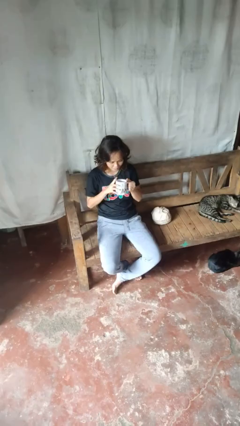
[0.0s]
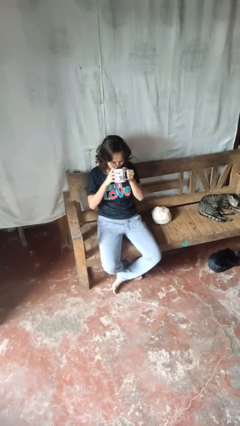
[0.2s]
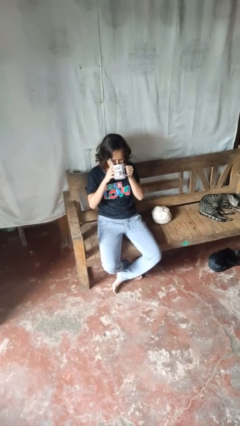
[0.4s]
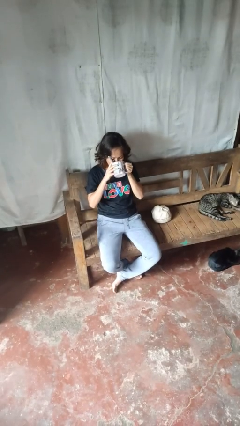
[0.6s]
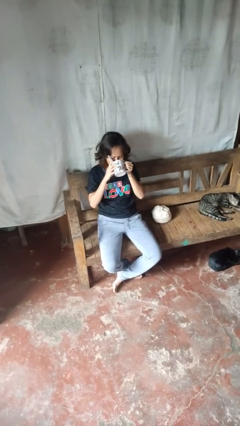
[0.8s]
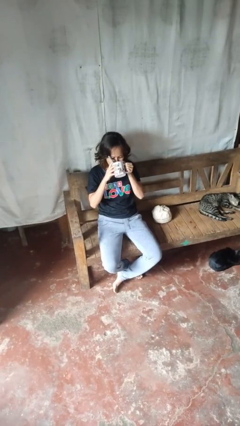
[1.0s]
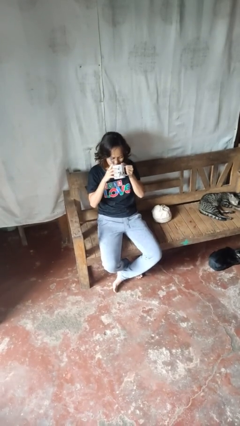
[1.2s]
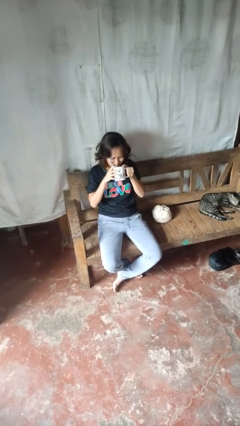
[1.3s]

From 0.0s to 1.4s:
person drinks from mug

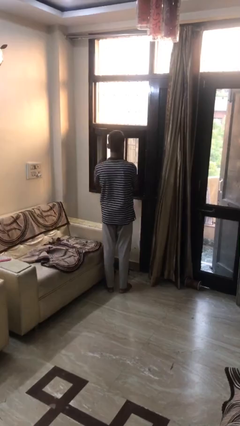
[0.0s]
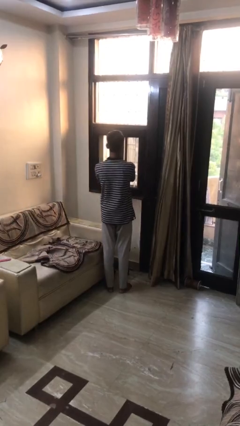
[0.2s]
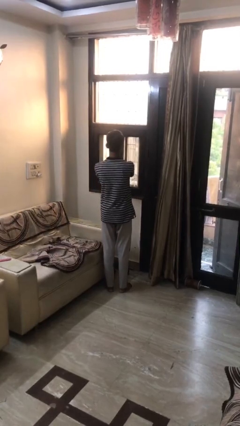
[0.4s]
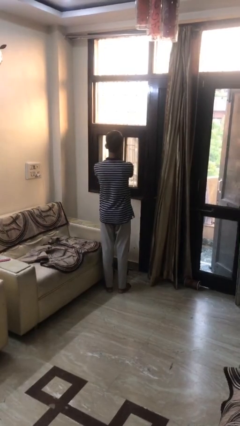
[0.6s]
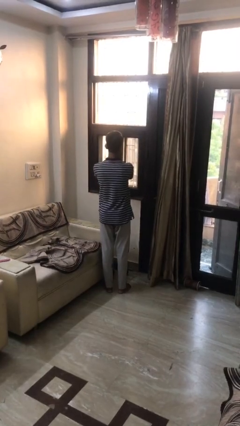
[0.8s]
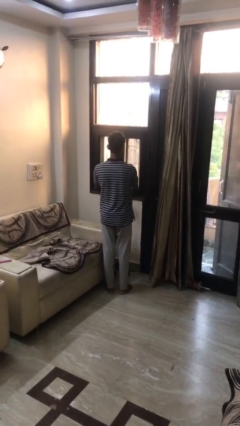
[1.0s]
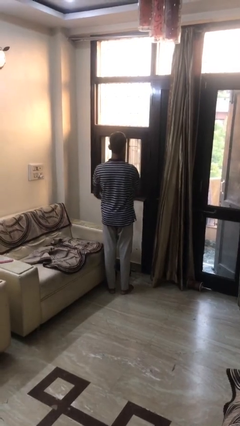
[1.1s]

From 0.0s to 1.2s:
person closes home window

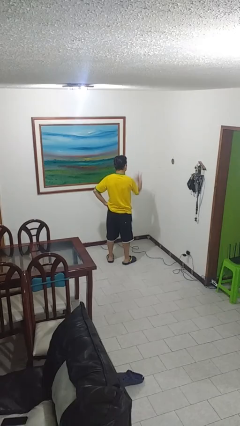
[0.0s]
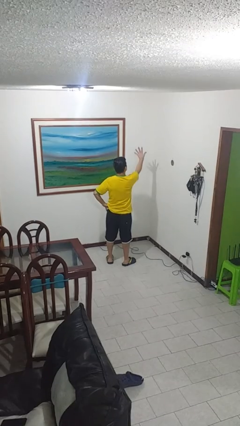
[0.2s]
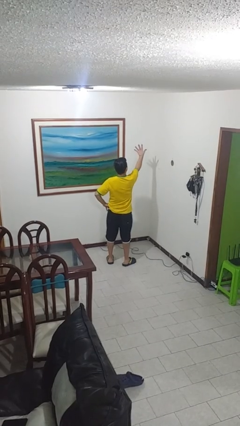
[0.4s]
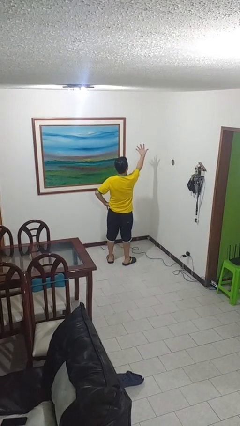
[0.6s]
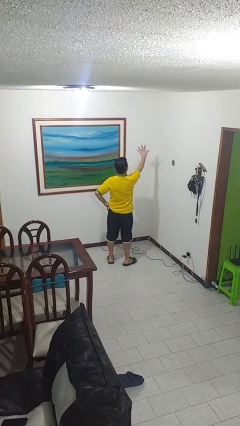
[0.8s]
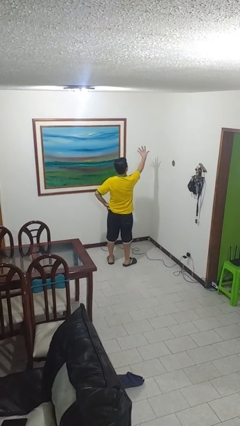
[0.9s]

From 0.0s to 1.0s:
person gestures number five

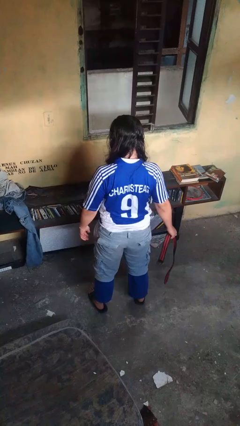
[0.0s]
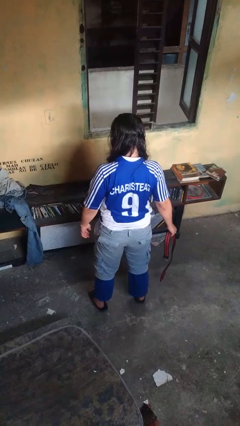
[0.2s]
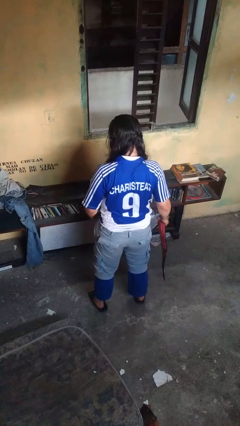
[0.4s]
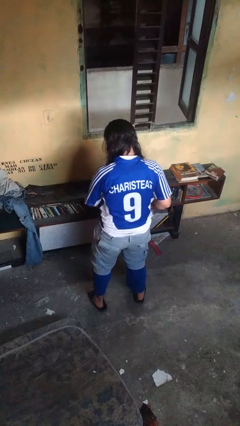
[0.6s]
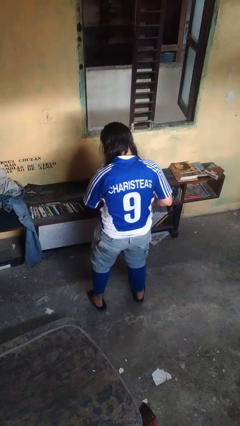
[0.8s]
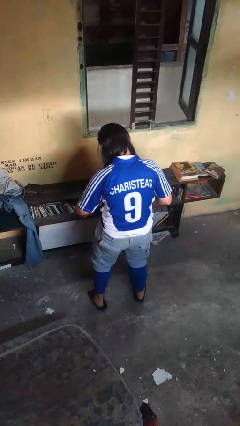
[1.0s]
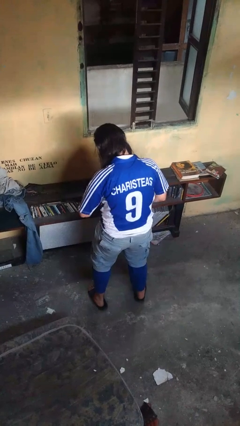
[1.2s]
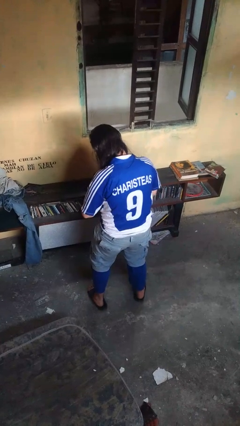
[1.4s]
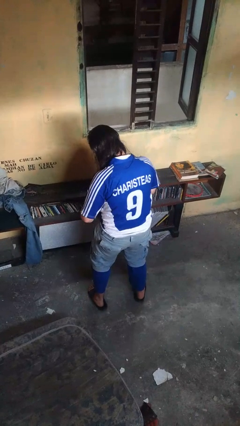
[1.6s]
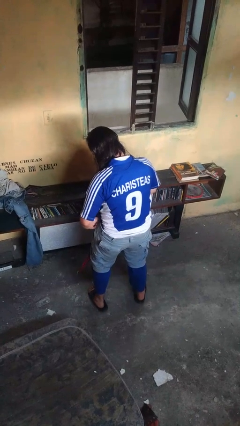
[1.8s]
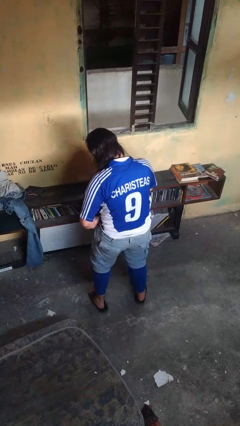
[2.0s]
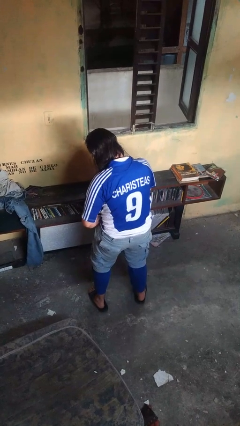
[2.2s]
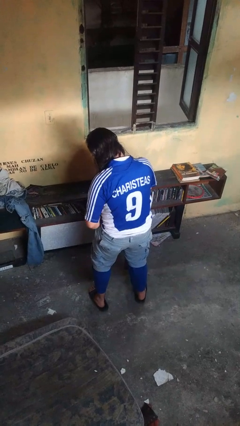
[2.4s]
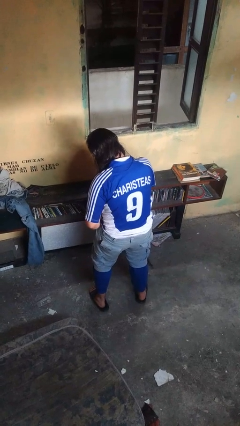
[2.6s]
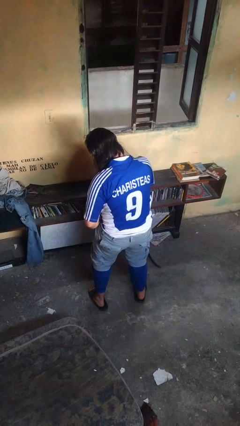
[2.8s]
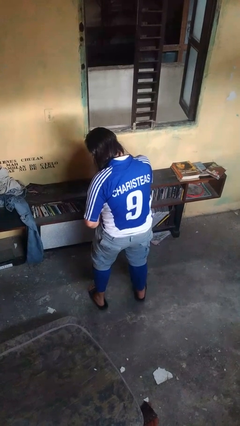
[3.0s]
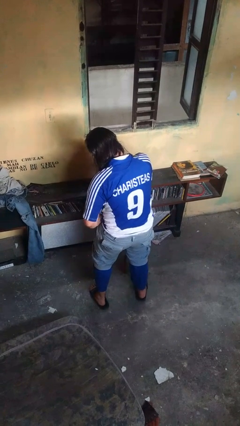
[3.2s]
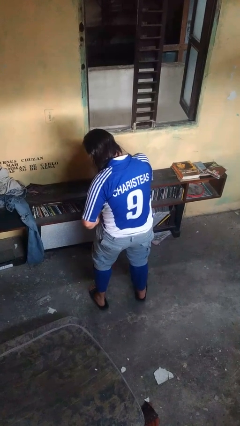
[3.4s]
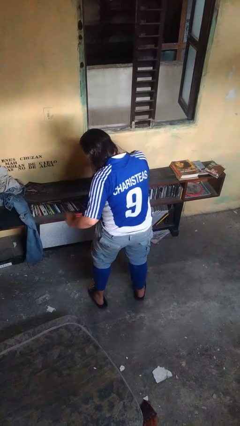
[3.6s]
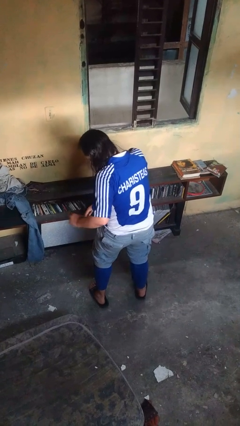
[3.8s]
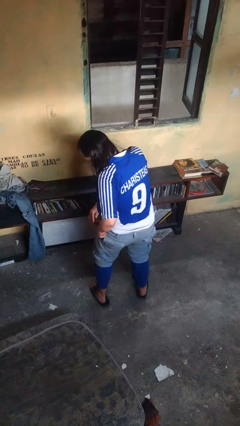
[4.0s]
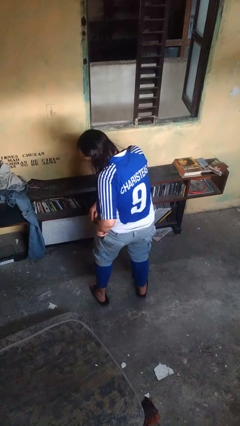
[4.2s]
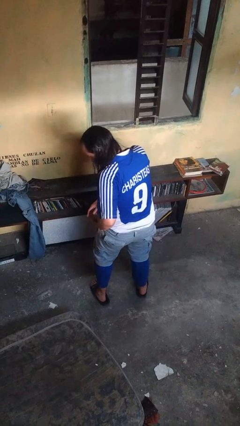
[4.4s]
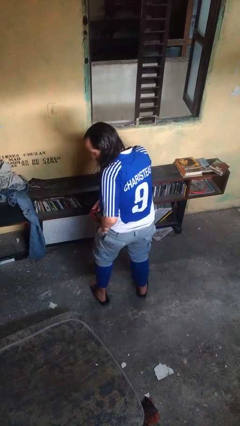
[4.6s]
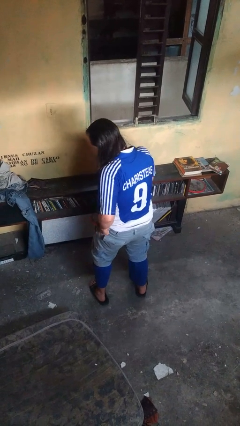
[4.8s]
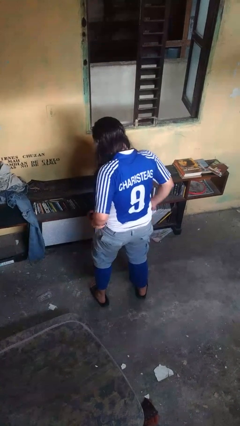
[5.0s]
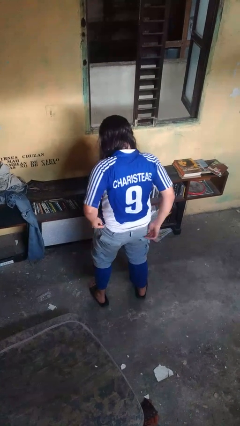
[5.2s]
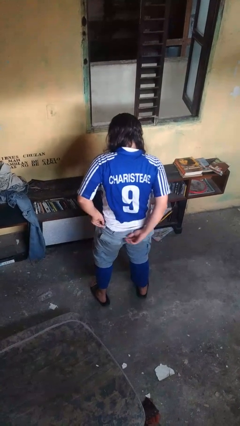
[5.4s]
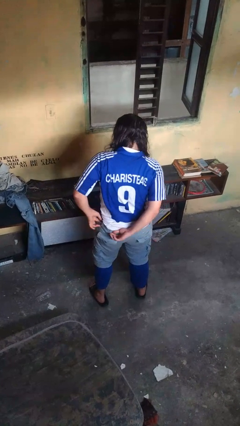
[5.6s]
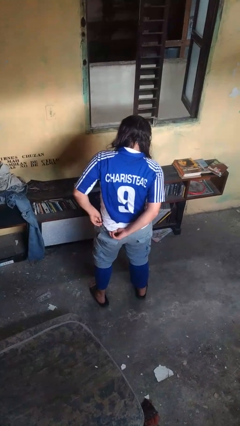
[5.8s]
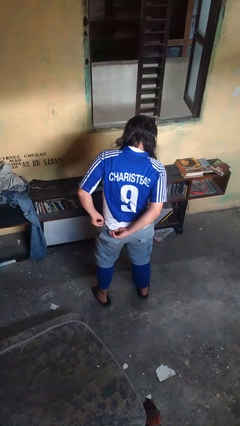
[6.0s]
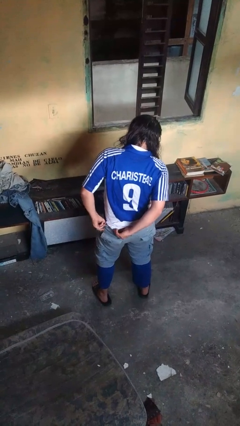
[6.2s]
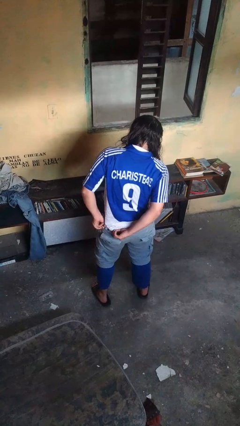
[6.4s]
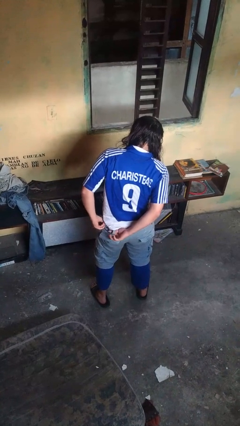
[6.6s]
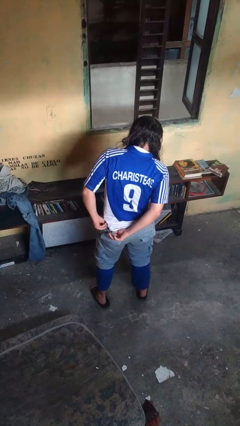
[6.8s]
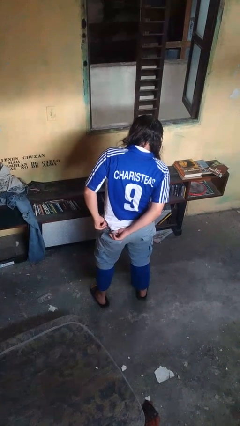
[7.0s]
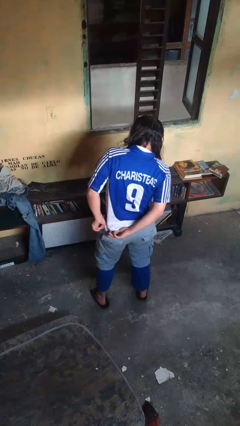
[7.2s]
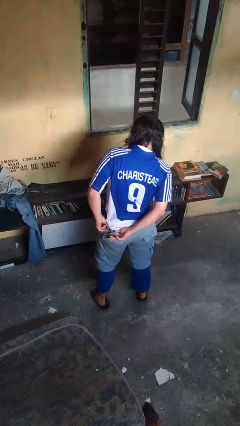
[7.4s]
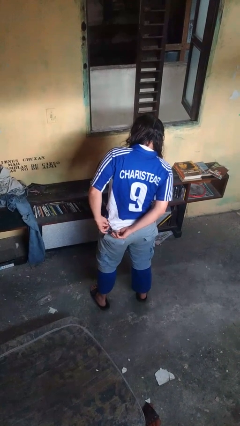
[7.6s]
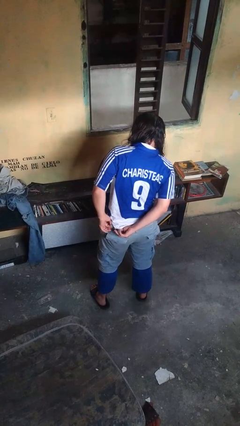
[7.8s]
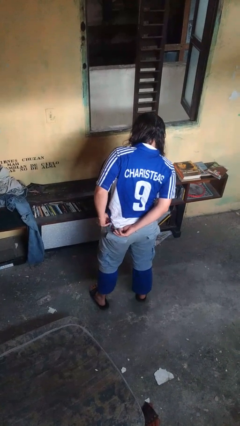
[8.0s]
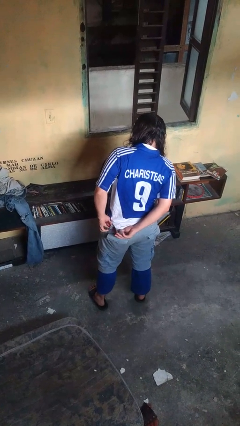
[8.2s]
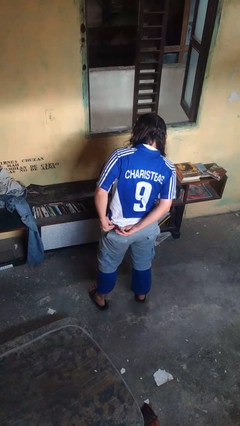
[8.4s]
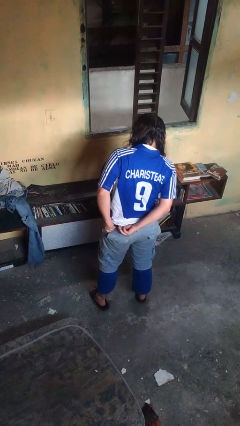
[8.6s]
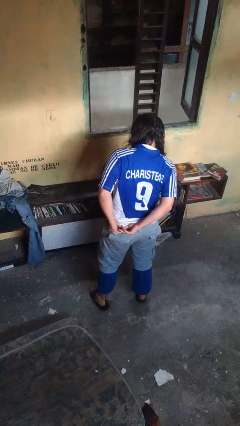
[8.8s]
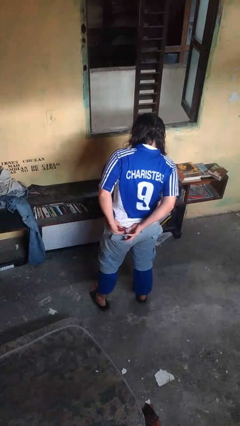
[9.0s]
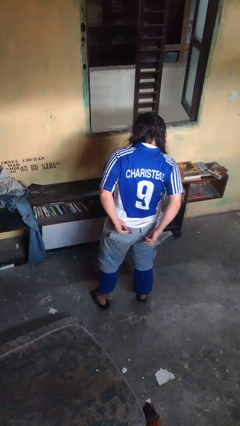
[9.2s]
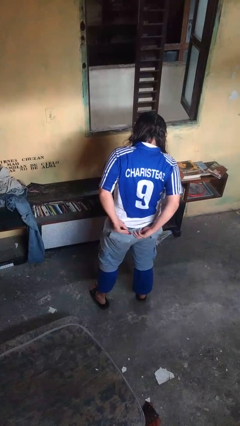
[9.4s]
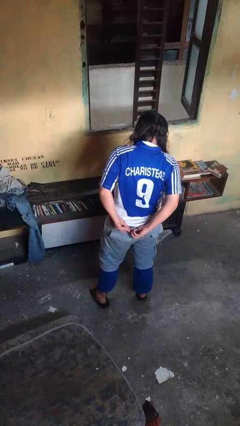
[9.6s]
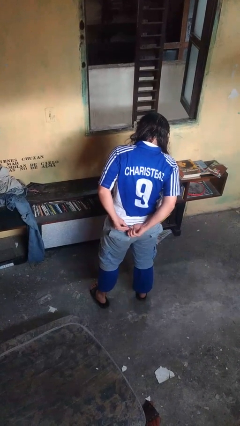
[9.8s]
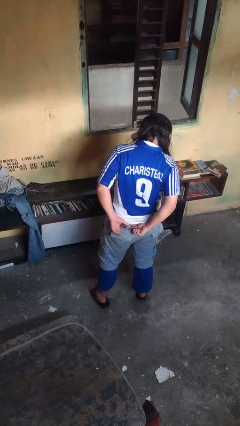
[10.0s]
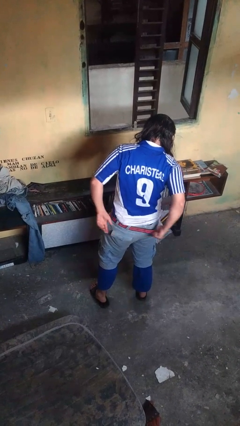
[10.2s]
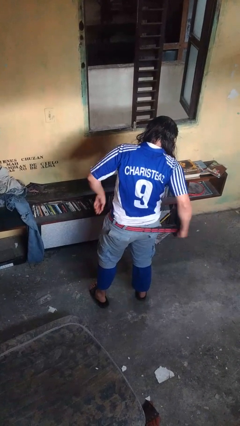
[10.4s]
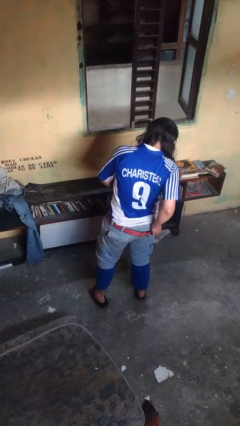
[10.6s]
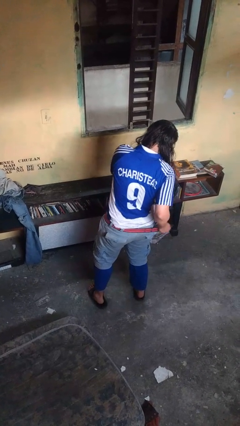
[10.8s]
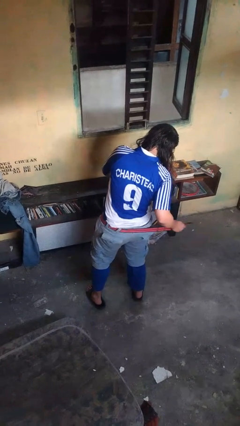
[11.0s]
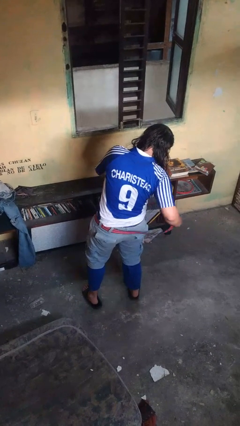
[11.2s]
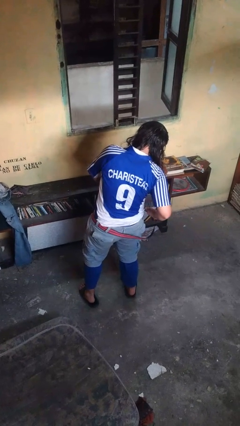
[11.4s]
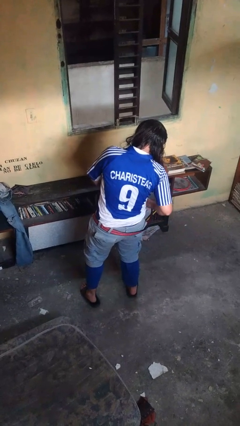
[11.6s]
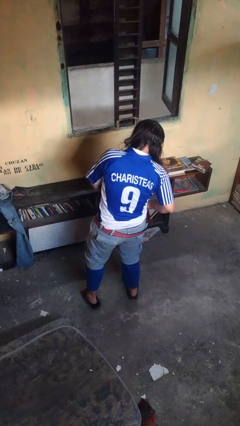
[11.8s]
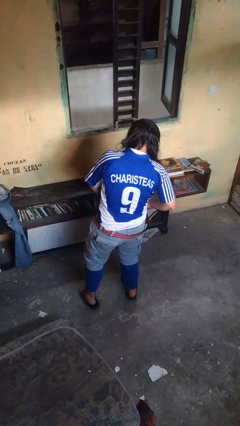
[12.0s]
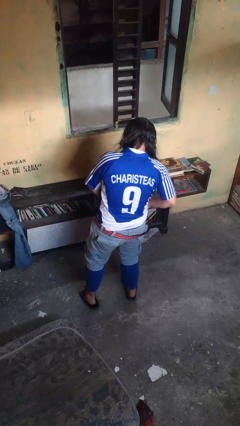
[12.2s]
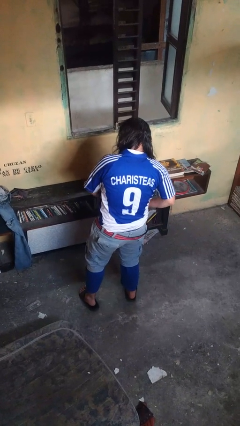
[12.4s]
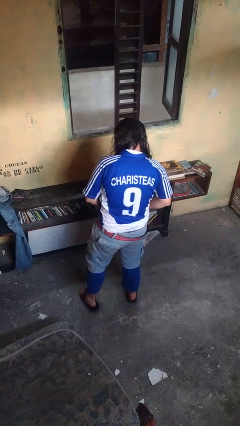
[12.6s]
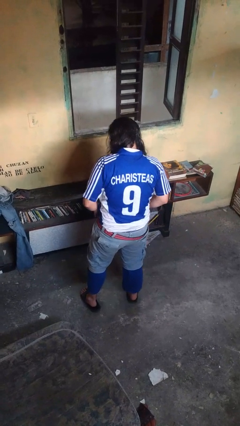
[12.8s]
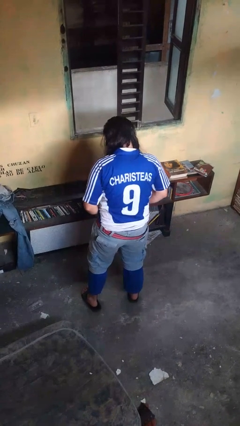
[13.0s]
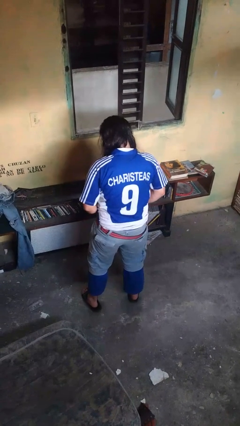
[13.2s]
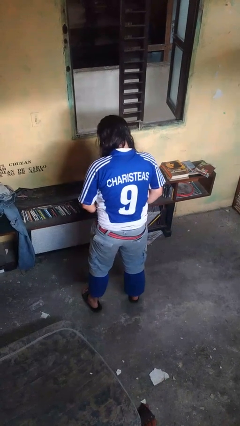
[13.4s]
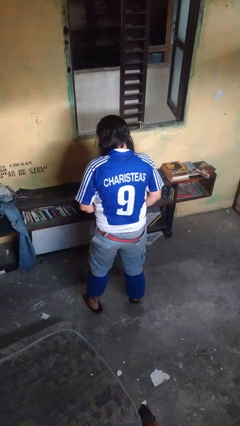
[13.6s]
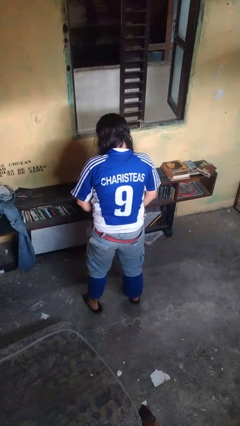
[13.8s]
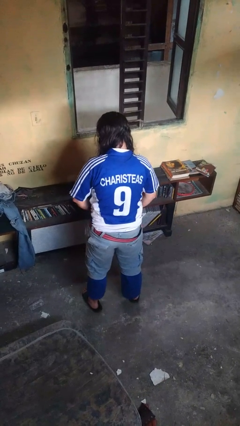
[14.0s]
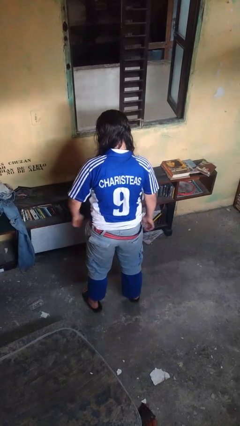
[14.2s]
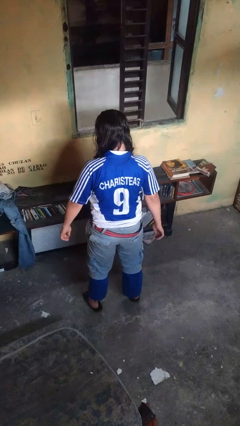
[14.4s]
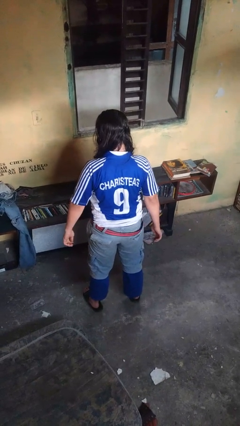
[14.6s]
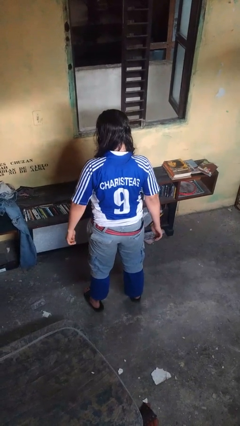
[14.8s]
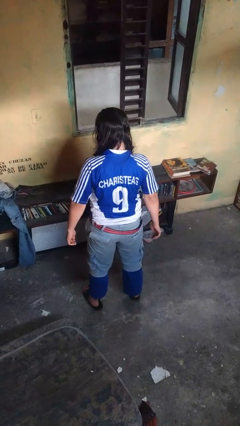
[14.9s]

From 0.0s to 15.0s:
person puts on belt
